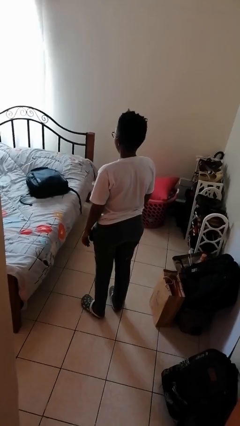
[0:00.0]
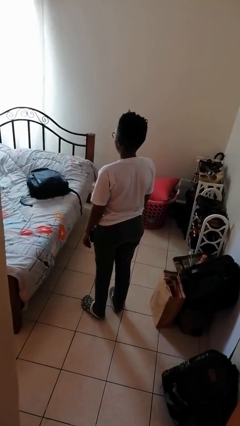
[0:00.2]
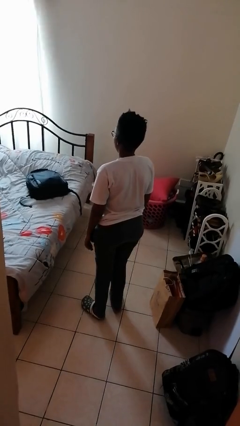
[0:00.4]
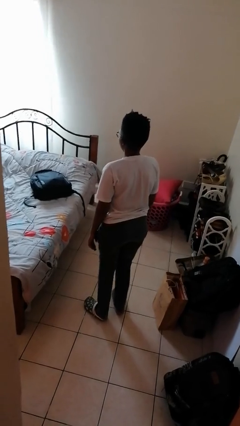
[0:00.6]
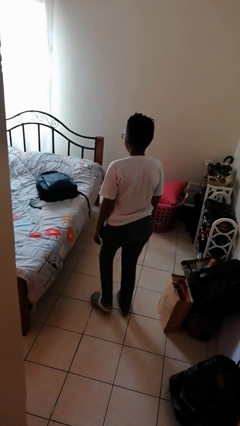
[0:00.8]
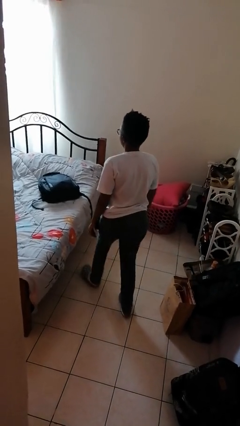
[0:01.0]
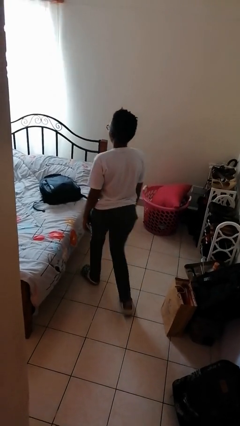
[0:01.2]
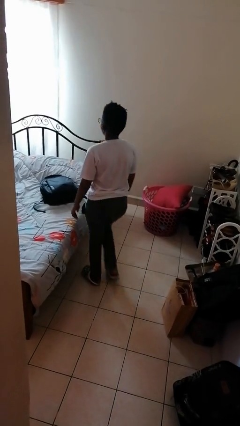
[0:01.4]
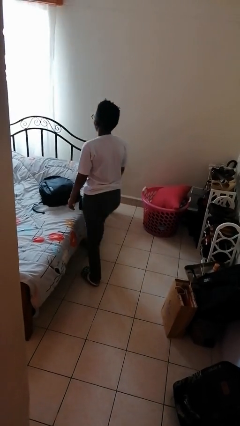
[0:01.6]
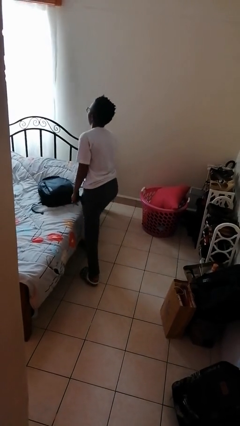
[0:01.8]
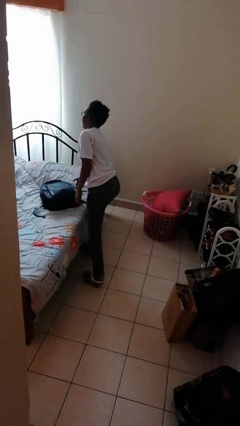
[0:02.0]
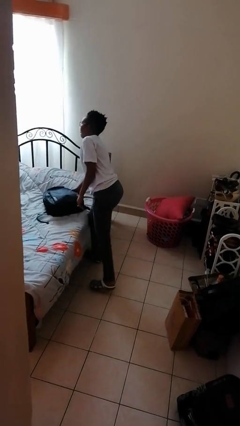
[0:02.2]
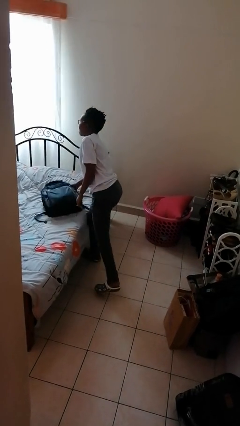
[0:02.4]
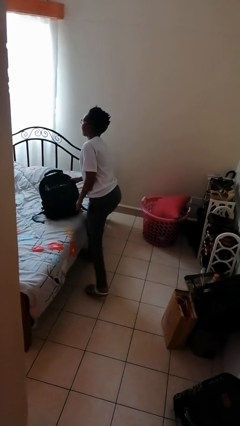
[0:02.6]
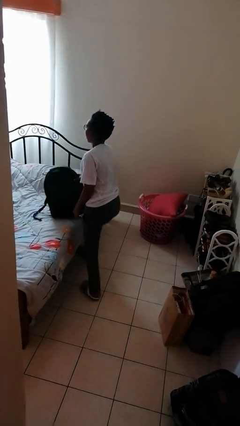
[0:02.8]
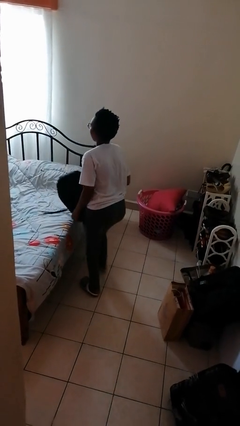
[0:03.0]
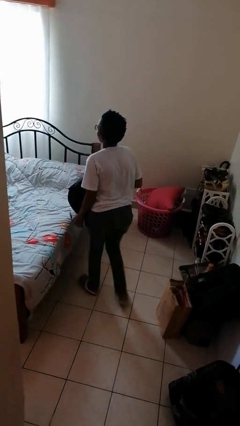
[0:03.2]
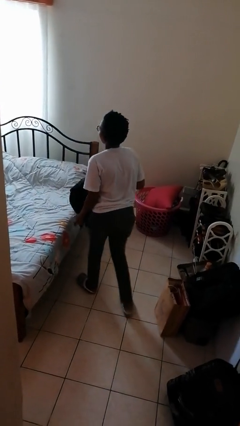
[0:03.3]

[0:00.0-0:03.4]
person picks up object from bed

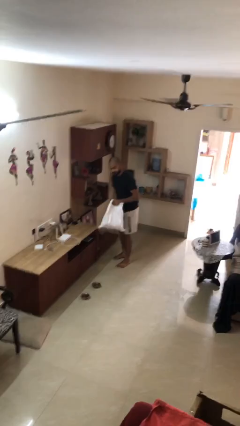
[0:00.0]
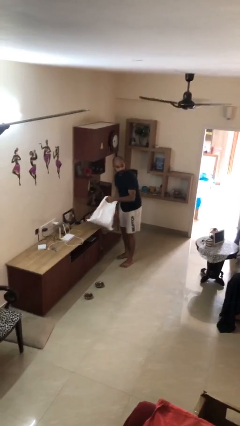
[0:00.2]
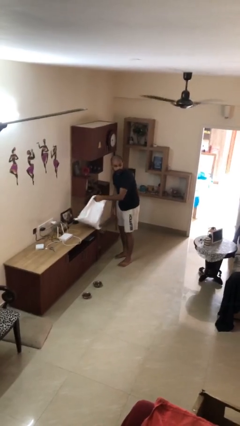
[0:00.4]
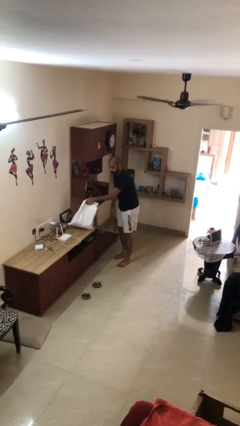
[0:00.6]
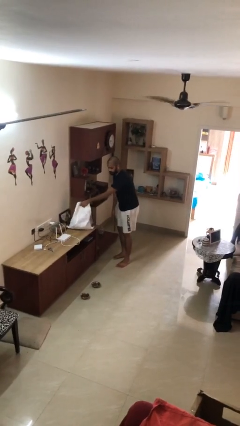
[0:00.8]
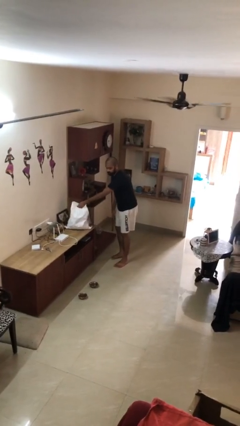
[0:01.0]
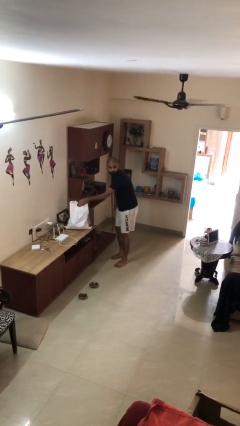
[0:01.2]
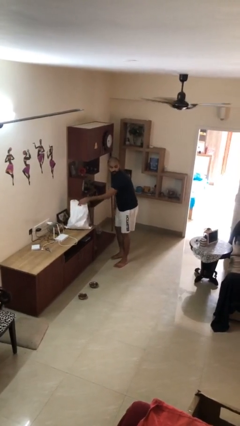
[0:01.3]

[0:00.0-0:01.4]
person puts down object on table

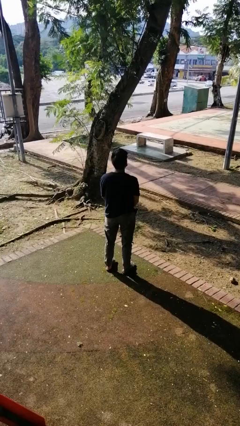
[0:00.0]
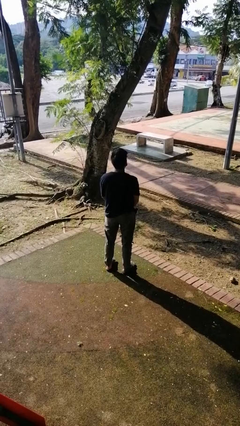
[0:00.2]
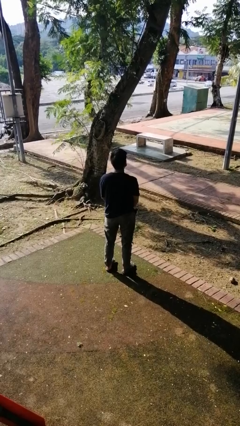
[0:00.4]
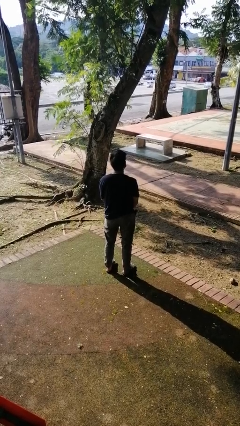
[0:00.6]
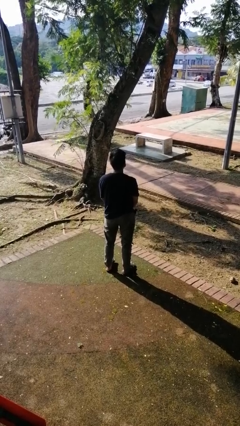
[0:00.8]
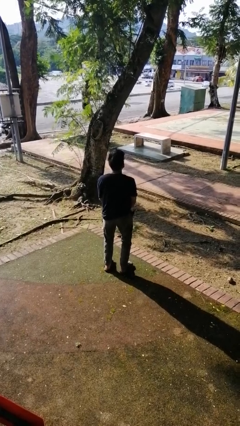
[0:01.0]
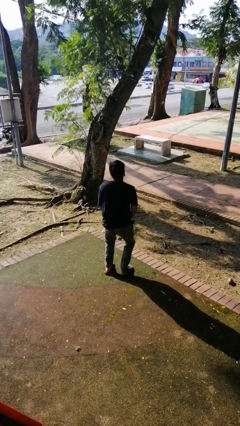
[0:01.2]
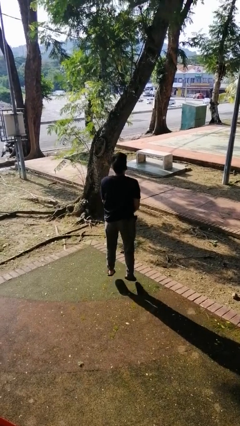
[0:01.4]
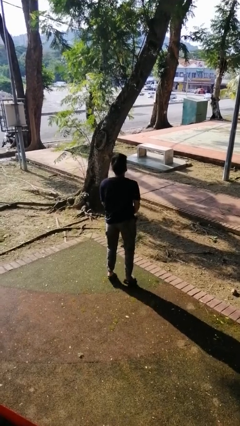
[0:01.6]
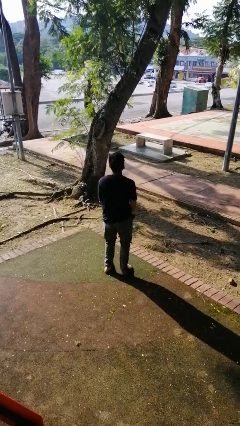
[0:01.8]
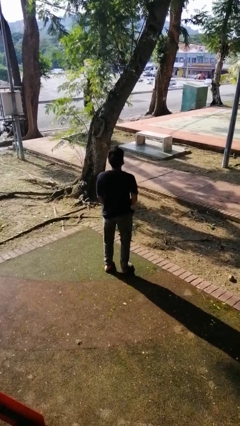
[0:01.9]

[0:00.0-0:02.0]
person jumps

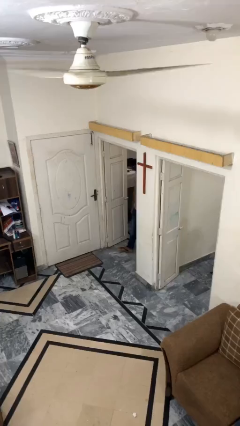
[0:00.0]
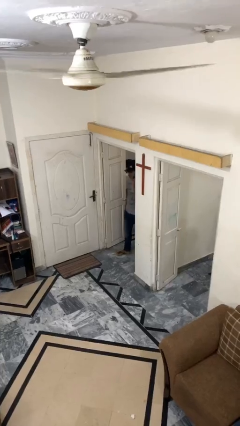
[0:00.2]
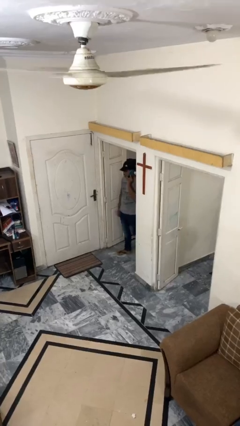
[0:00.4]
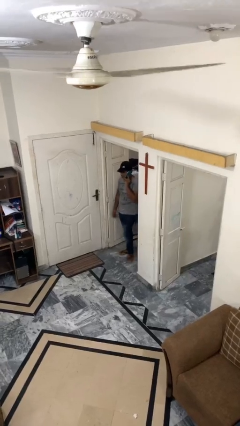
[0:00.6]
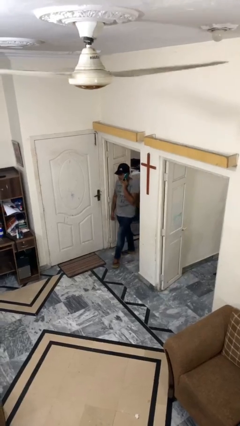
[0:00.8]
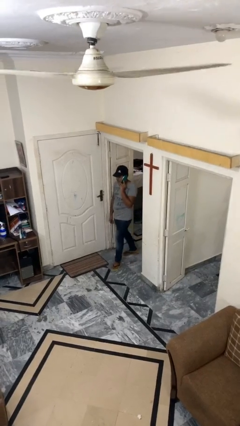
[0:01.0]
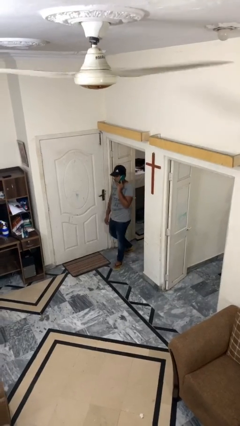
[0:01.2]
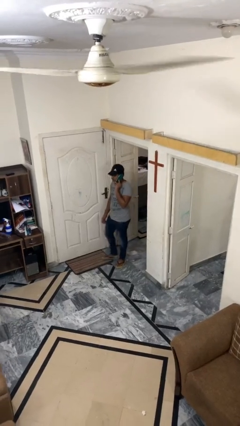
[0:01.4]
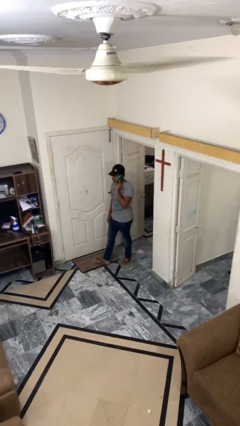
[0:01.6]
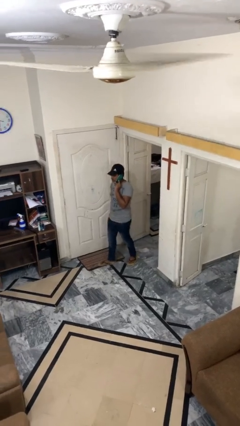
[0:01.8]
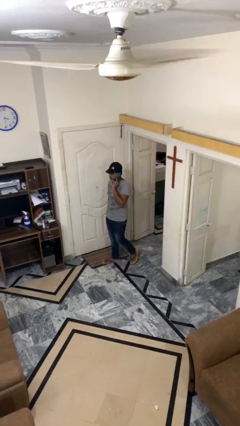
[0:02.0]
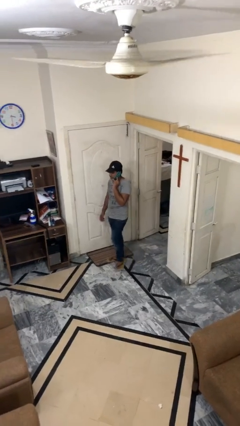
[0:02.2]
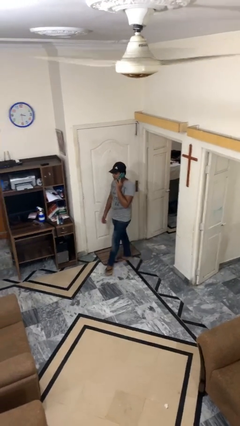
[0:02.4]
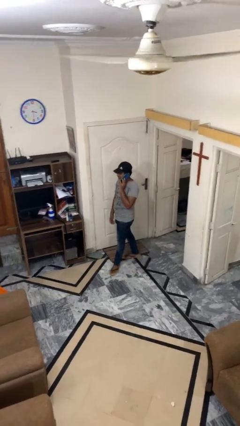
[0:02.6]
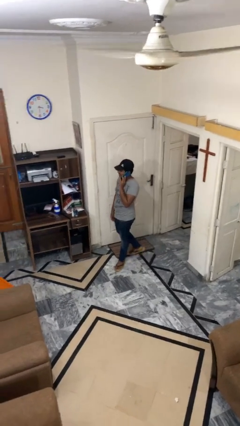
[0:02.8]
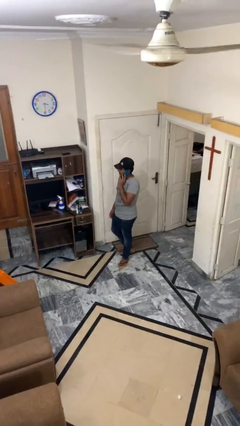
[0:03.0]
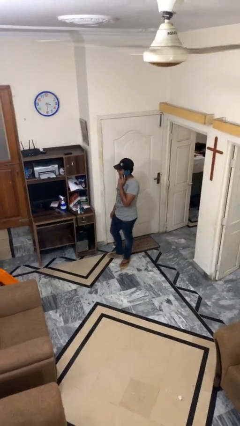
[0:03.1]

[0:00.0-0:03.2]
person enters scene through structure

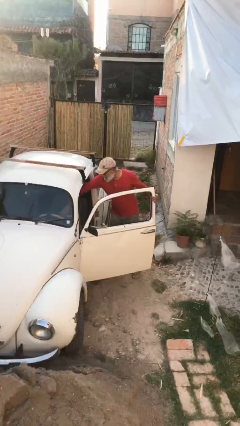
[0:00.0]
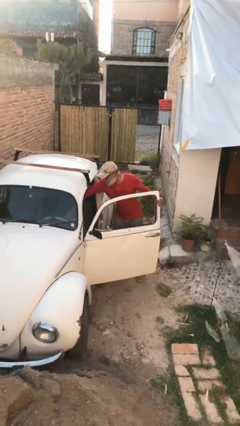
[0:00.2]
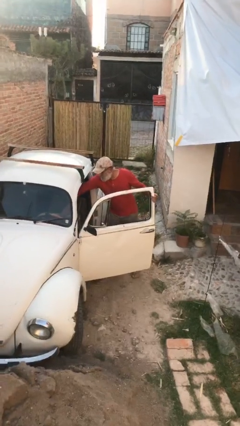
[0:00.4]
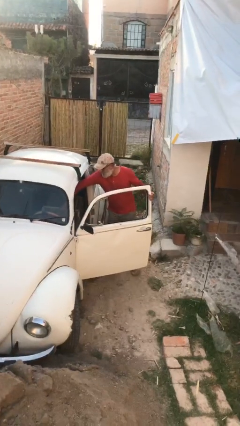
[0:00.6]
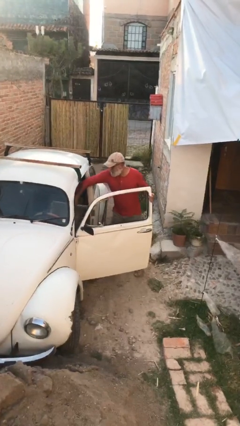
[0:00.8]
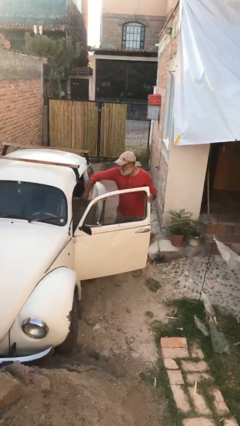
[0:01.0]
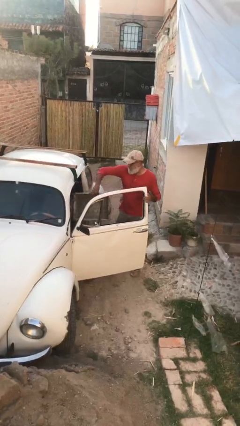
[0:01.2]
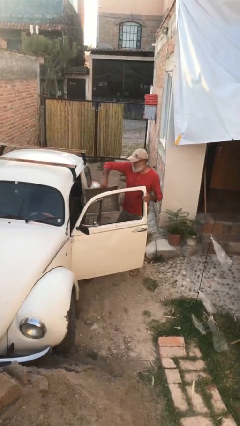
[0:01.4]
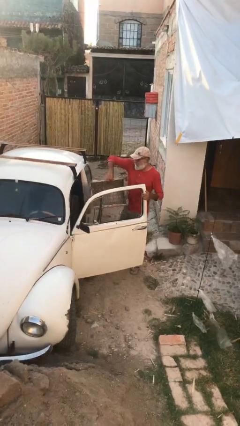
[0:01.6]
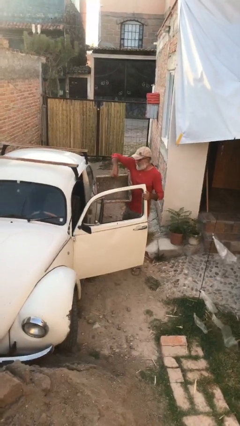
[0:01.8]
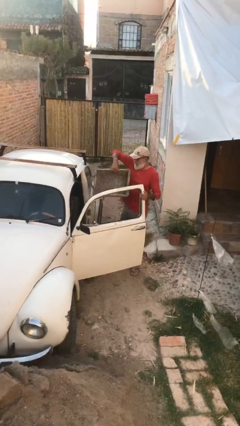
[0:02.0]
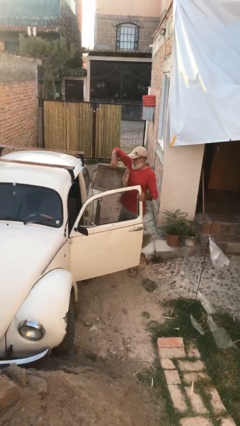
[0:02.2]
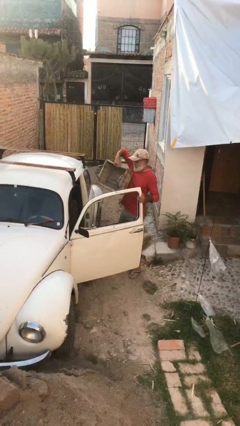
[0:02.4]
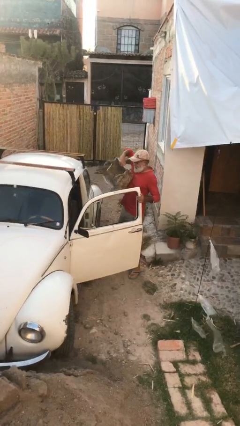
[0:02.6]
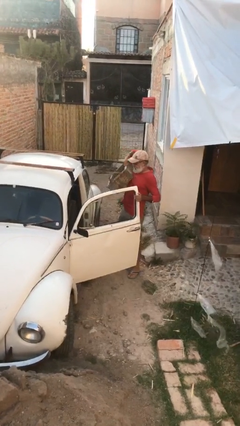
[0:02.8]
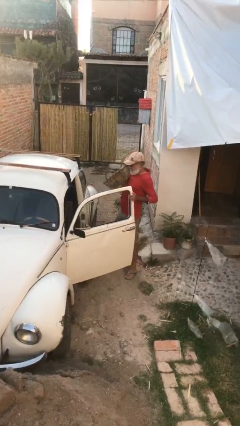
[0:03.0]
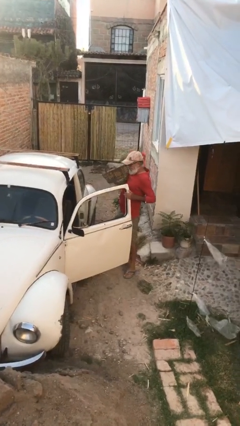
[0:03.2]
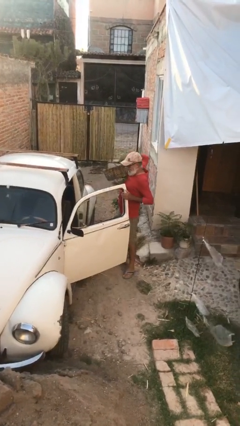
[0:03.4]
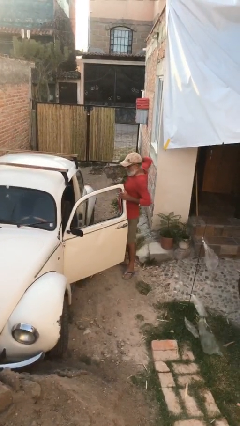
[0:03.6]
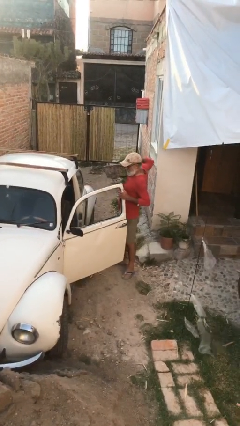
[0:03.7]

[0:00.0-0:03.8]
person unloads car

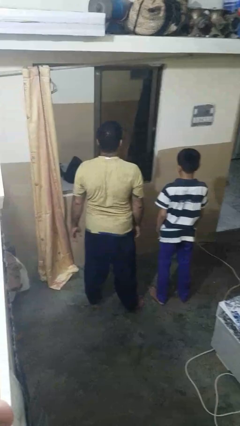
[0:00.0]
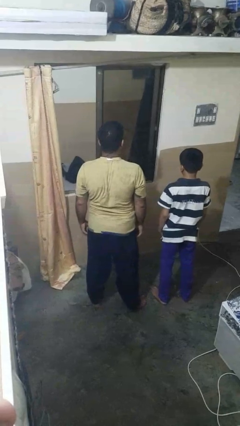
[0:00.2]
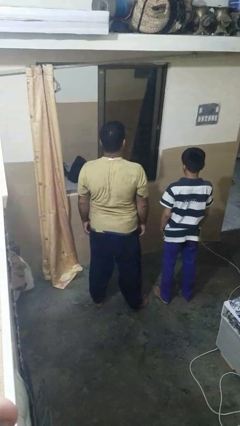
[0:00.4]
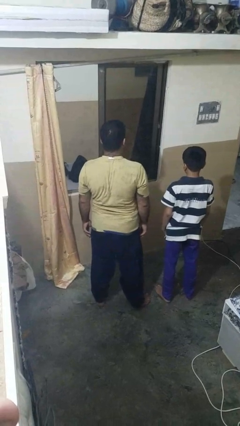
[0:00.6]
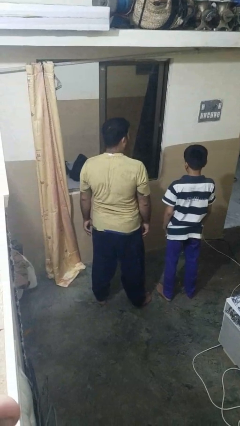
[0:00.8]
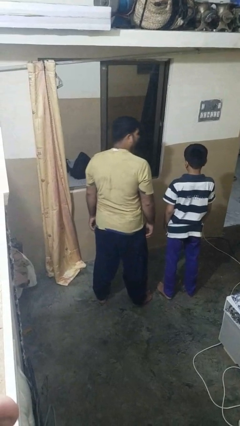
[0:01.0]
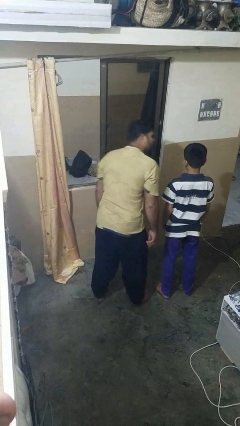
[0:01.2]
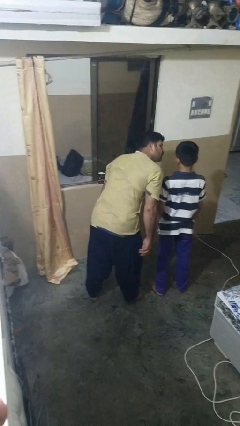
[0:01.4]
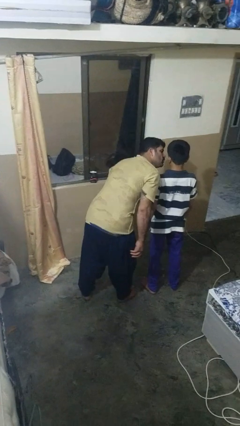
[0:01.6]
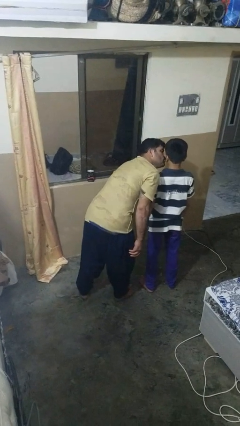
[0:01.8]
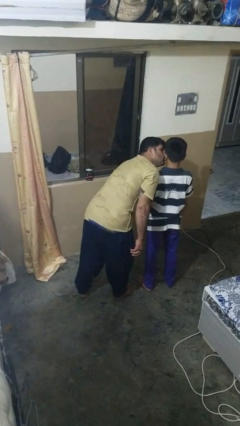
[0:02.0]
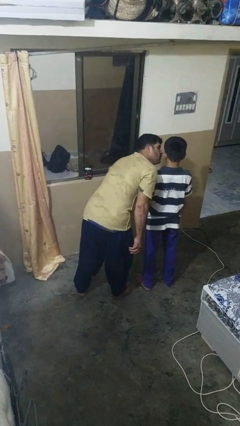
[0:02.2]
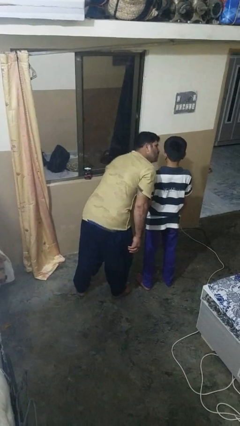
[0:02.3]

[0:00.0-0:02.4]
person kisses cheek of person

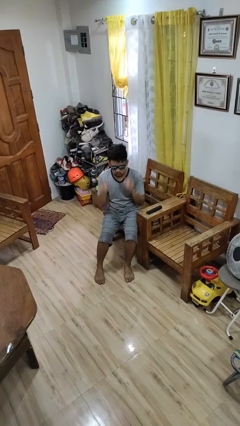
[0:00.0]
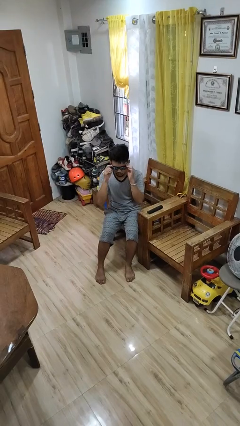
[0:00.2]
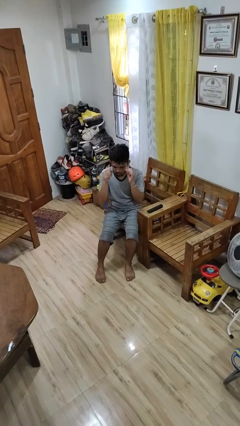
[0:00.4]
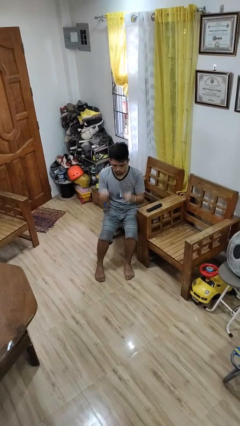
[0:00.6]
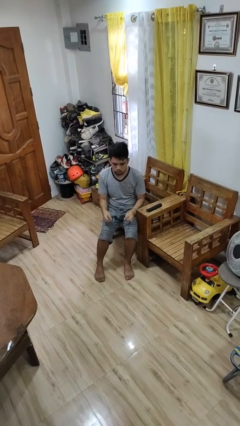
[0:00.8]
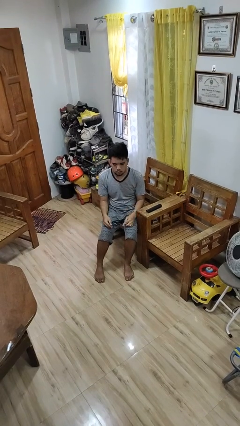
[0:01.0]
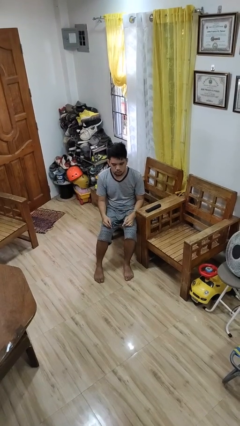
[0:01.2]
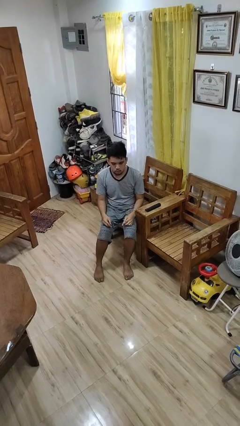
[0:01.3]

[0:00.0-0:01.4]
person takes off sunglasses
